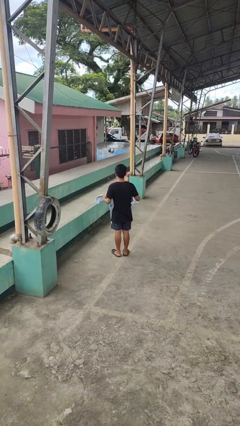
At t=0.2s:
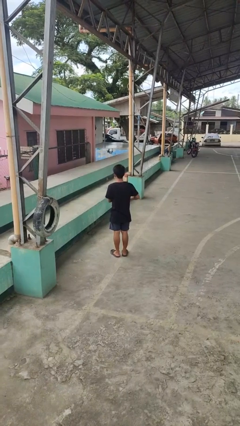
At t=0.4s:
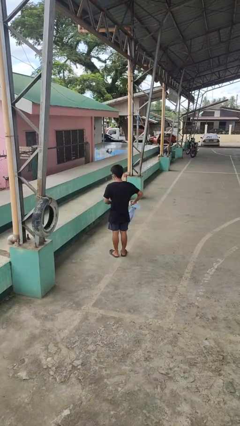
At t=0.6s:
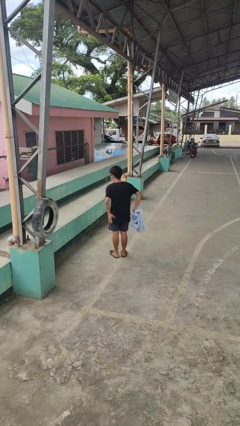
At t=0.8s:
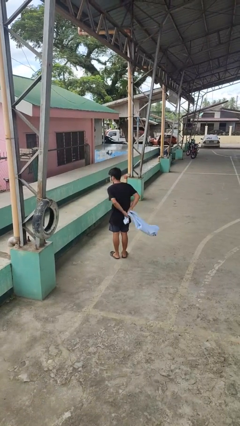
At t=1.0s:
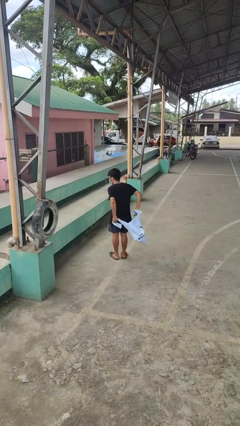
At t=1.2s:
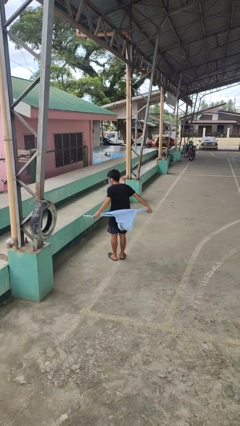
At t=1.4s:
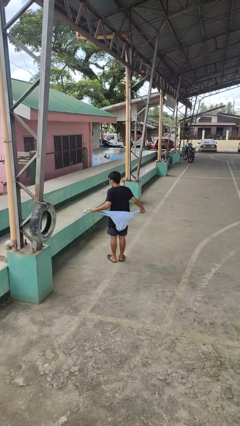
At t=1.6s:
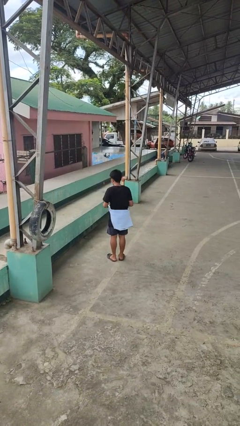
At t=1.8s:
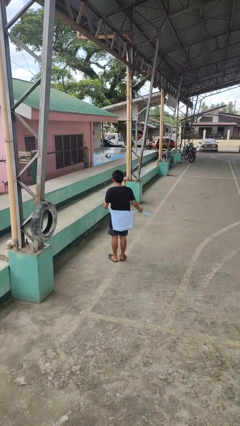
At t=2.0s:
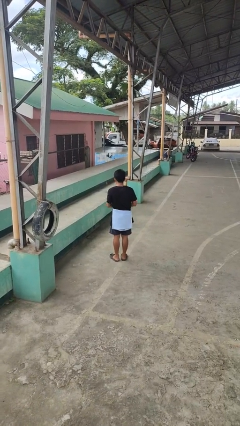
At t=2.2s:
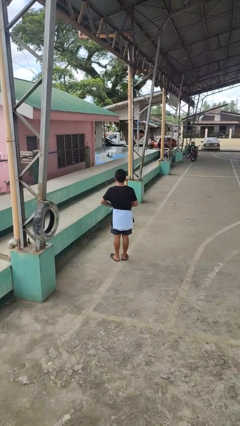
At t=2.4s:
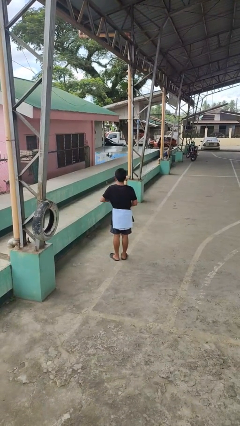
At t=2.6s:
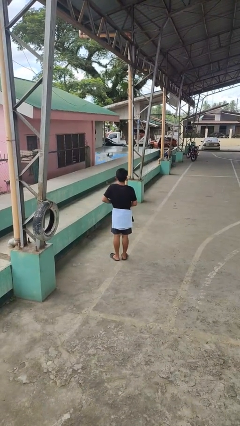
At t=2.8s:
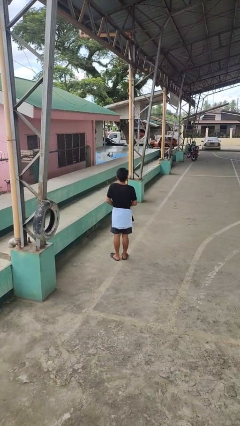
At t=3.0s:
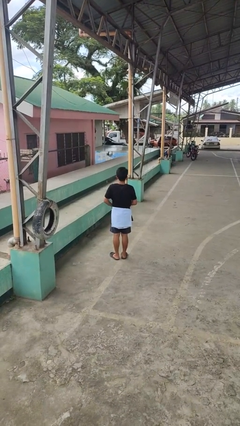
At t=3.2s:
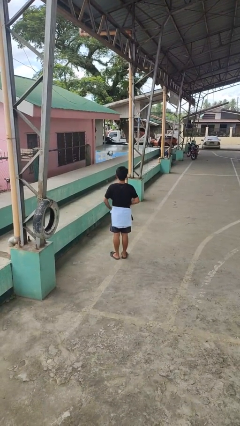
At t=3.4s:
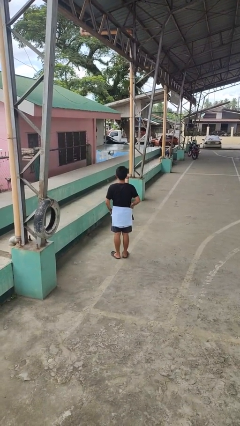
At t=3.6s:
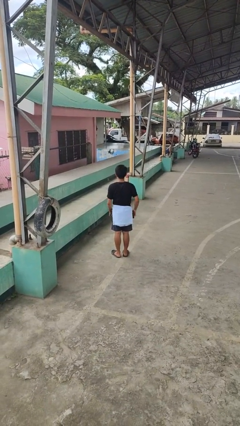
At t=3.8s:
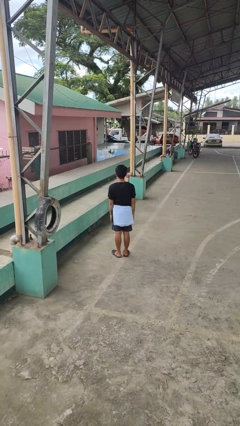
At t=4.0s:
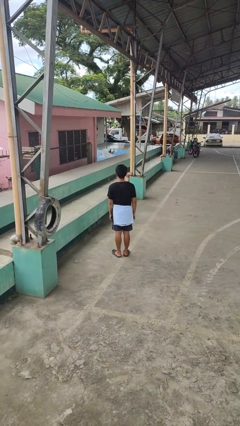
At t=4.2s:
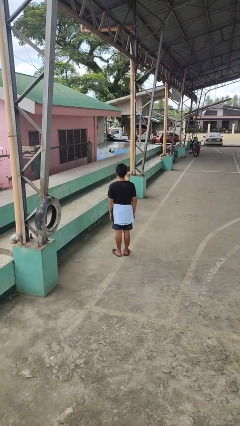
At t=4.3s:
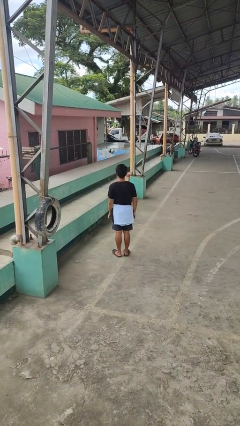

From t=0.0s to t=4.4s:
person ties jacket around waist

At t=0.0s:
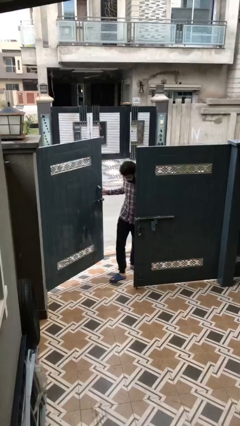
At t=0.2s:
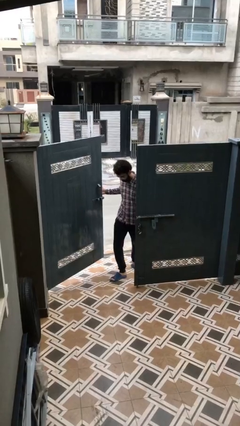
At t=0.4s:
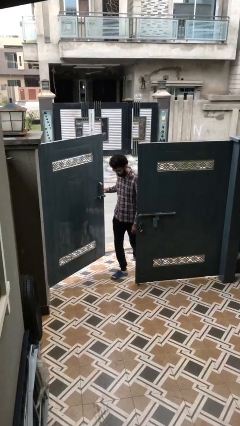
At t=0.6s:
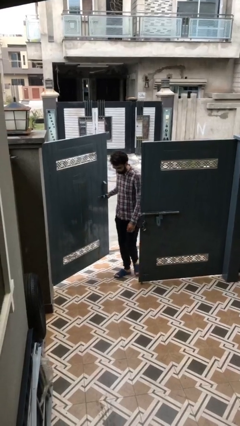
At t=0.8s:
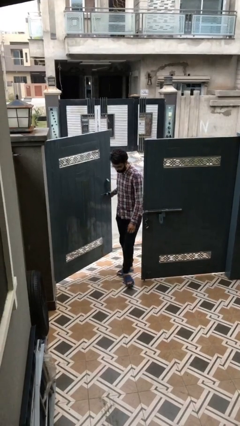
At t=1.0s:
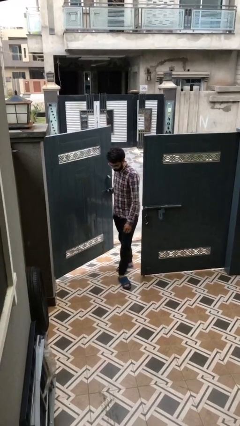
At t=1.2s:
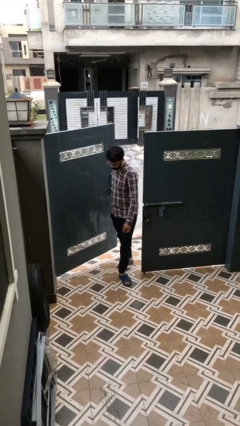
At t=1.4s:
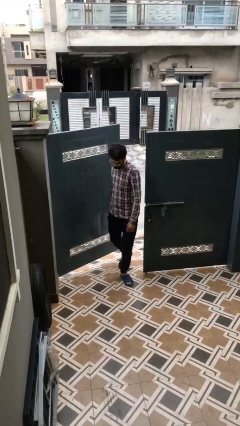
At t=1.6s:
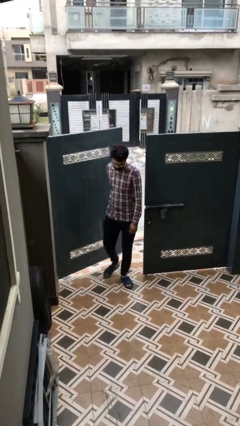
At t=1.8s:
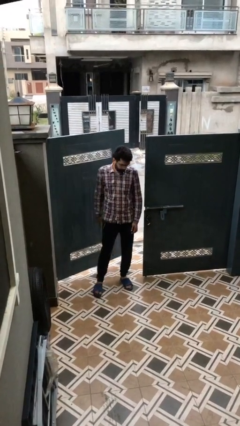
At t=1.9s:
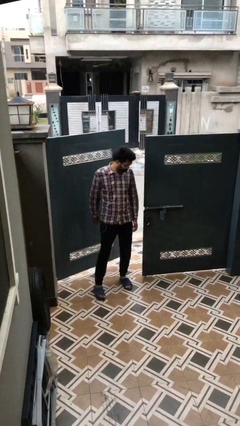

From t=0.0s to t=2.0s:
person enters scene through structure

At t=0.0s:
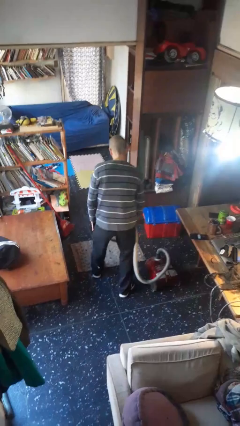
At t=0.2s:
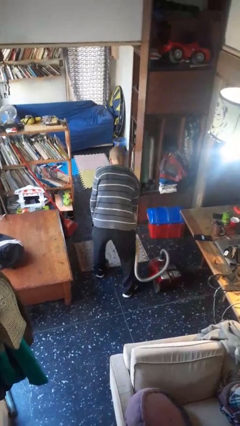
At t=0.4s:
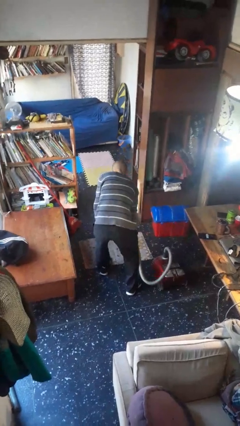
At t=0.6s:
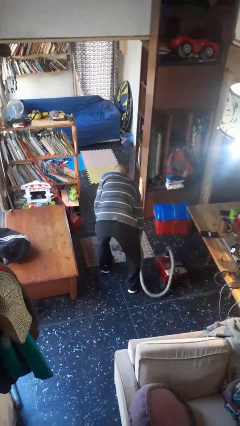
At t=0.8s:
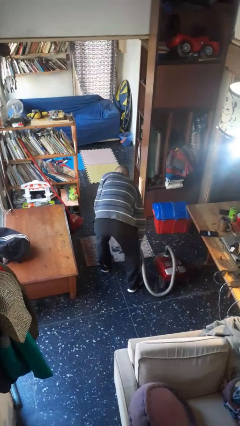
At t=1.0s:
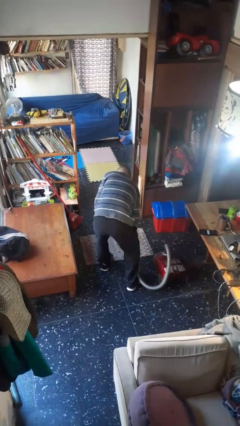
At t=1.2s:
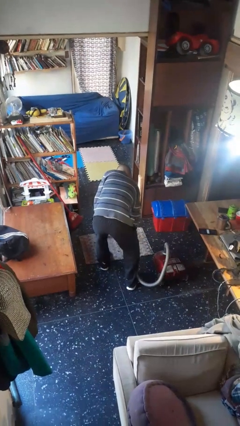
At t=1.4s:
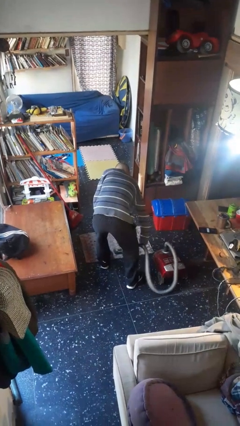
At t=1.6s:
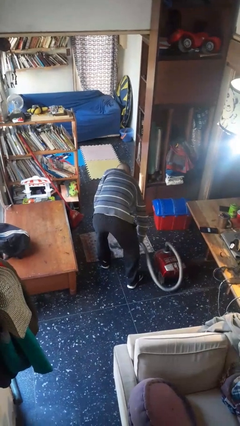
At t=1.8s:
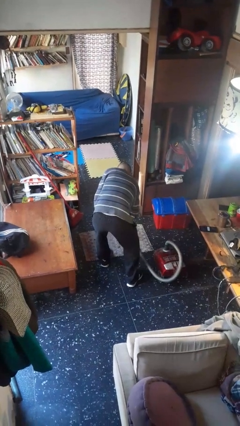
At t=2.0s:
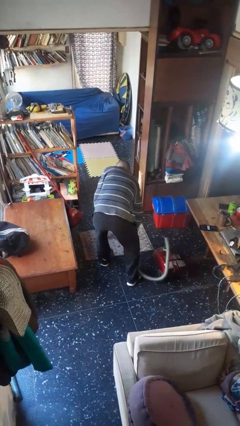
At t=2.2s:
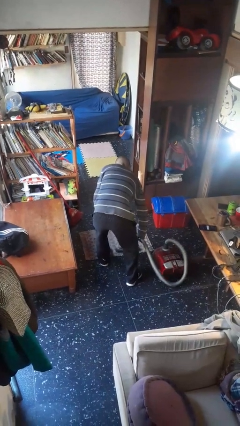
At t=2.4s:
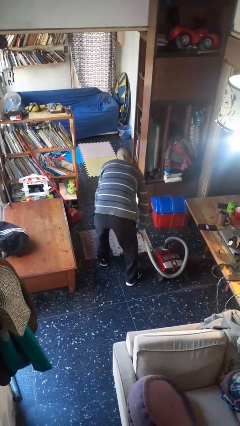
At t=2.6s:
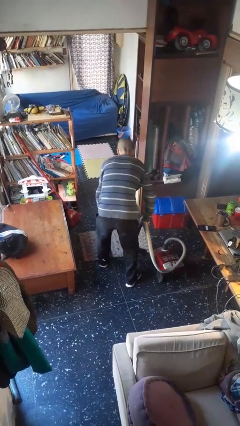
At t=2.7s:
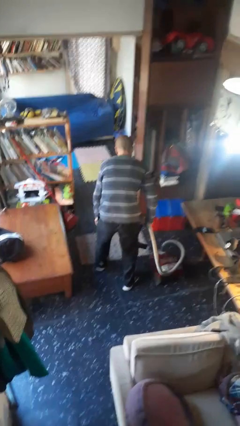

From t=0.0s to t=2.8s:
person vacuums carpet

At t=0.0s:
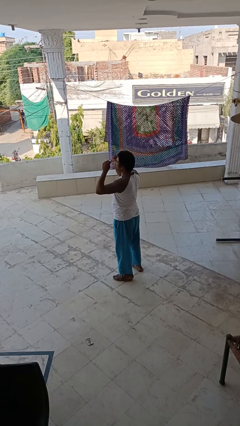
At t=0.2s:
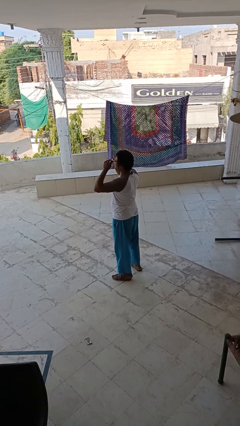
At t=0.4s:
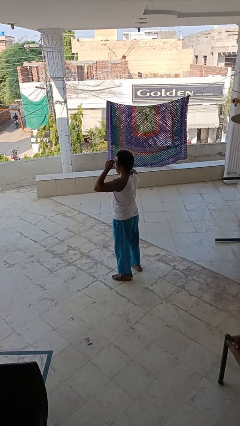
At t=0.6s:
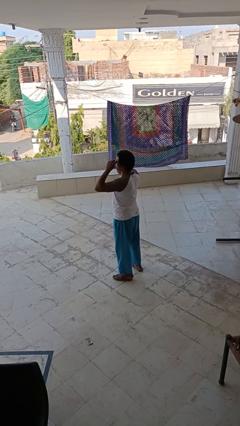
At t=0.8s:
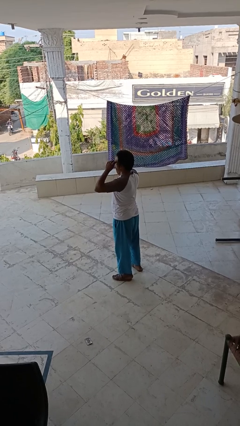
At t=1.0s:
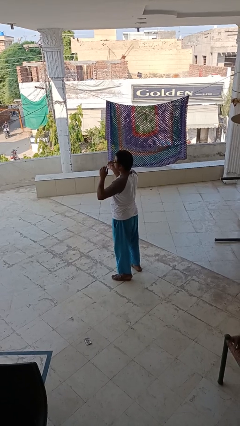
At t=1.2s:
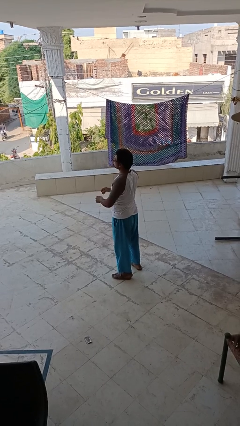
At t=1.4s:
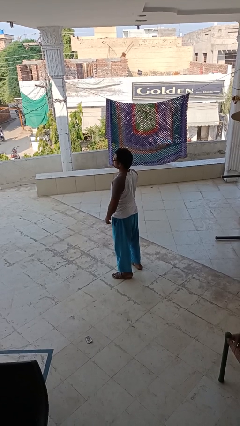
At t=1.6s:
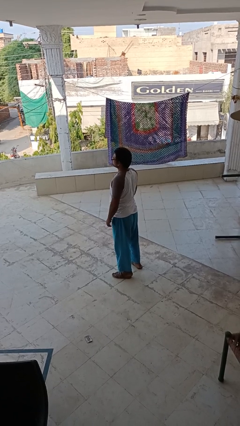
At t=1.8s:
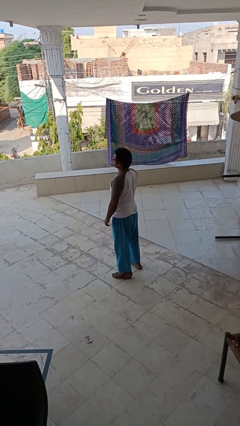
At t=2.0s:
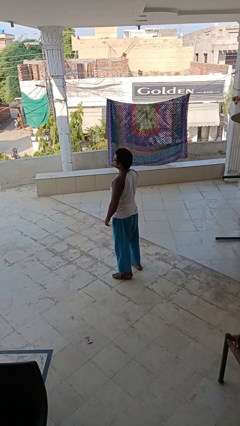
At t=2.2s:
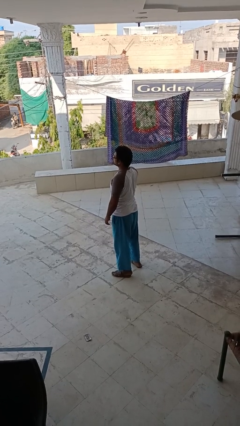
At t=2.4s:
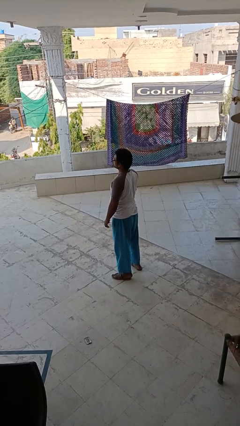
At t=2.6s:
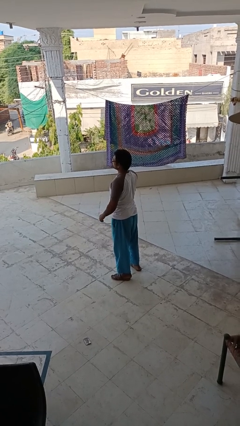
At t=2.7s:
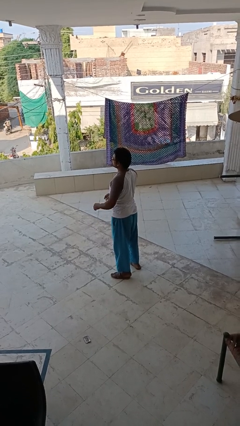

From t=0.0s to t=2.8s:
person puts on glasses

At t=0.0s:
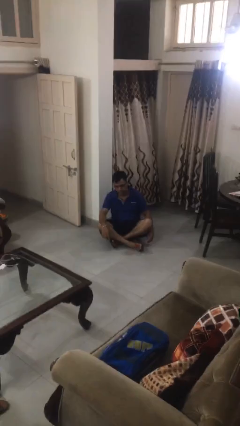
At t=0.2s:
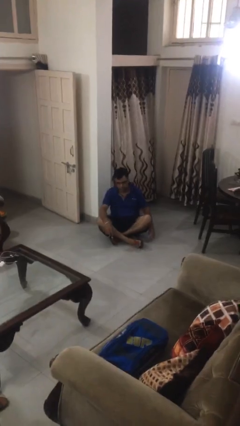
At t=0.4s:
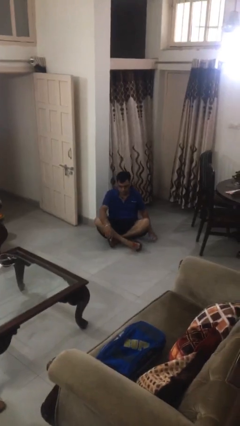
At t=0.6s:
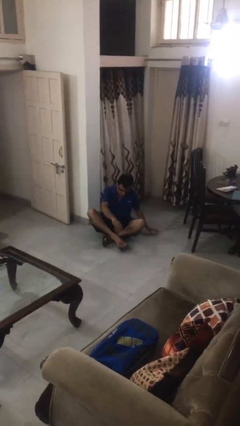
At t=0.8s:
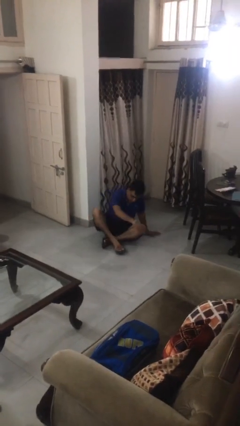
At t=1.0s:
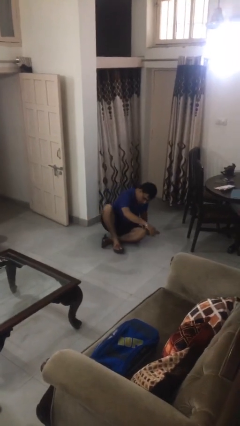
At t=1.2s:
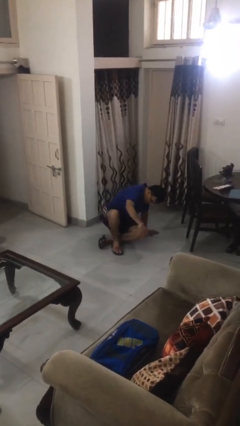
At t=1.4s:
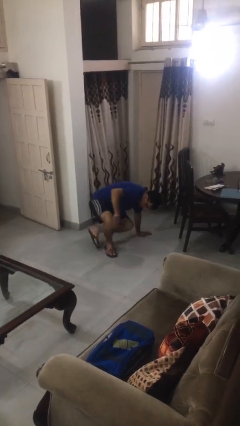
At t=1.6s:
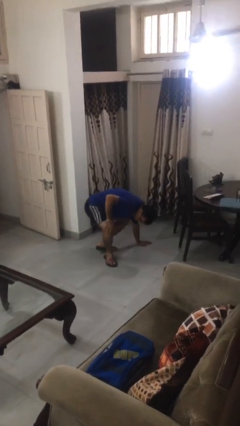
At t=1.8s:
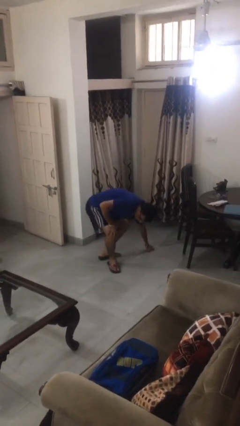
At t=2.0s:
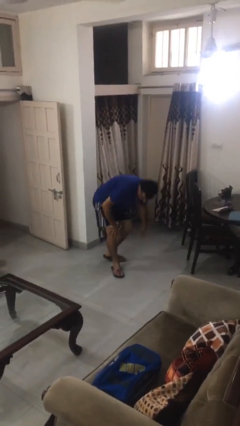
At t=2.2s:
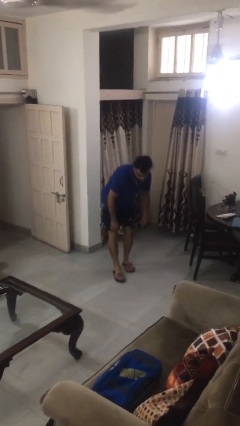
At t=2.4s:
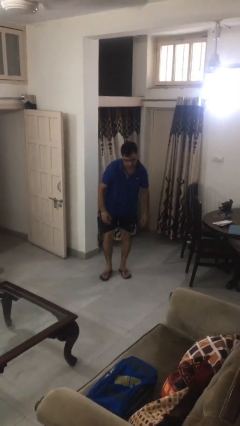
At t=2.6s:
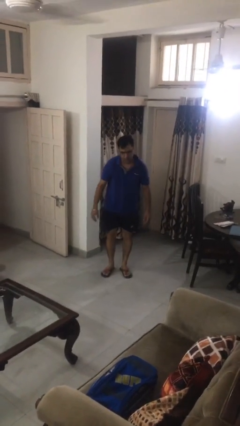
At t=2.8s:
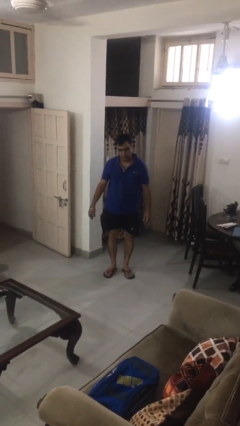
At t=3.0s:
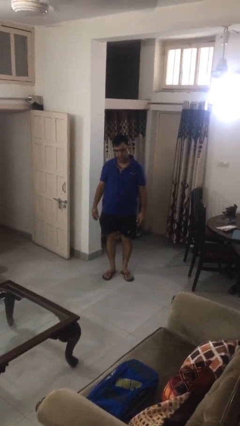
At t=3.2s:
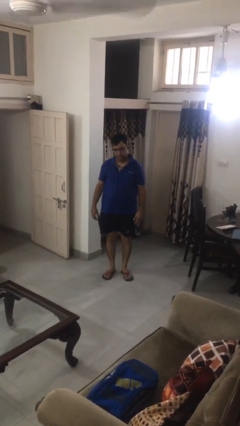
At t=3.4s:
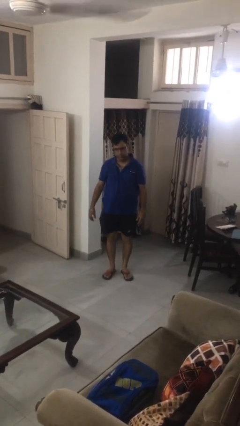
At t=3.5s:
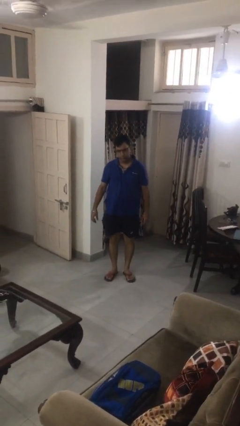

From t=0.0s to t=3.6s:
person stands up from floor

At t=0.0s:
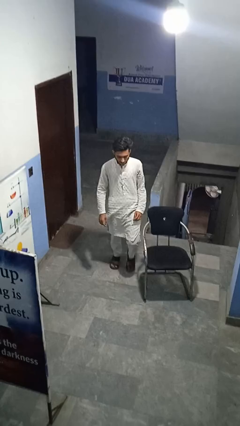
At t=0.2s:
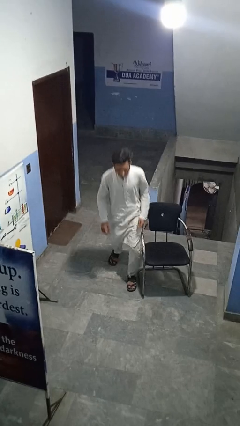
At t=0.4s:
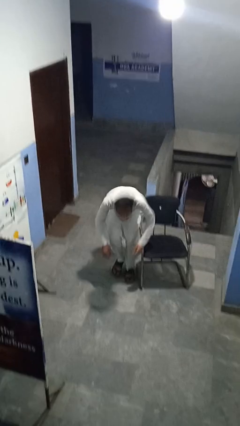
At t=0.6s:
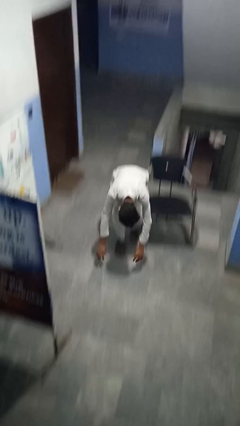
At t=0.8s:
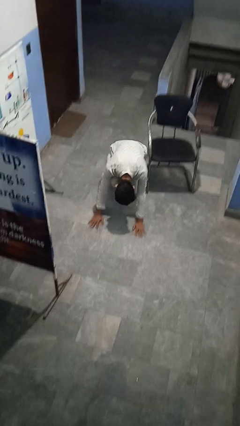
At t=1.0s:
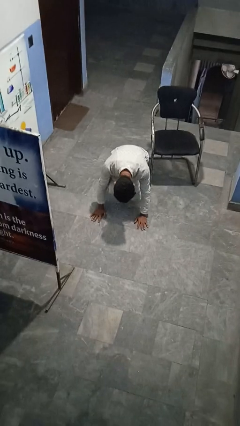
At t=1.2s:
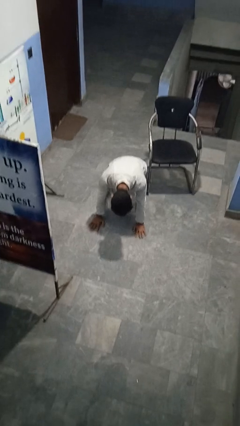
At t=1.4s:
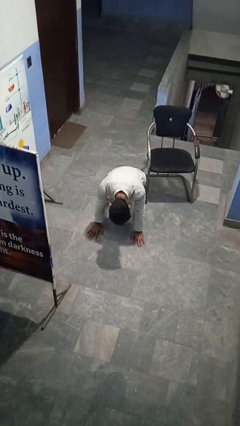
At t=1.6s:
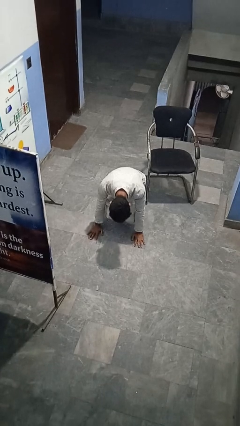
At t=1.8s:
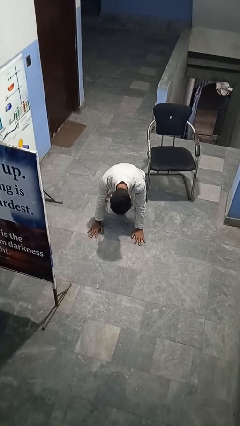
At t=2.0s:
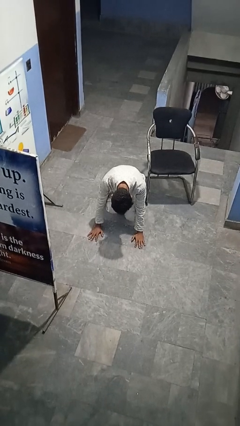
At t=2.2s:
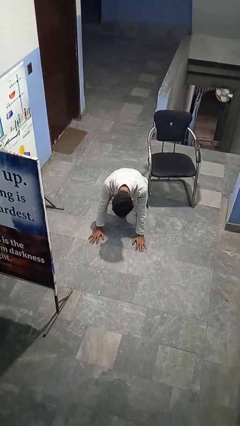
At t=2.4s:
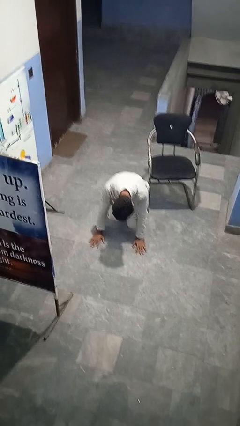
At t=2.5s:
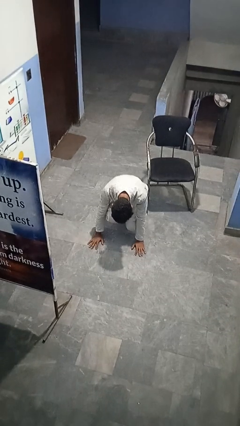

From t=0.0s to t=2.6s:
person trips on object on floor
